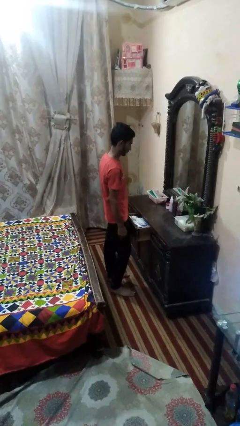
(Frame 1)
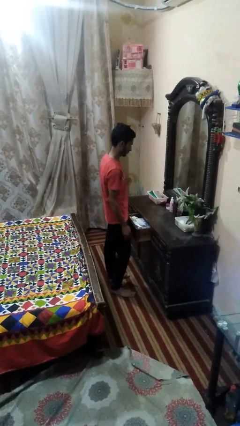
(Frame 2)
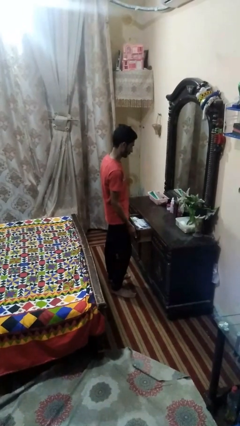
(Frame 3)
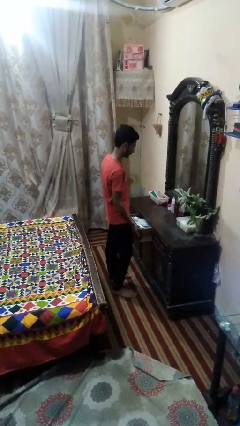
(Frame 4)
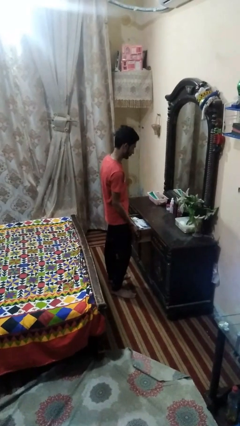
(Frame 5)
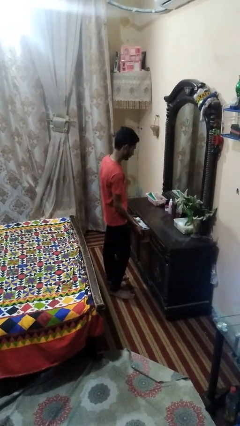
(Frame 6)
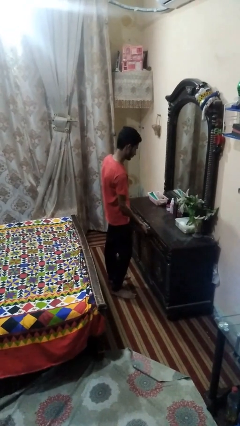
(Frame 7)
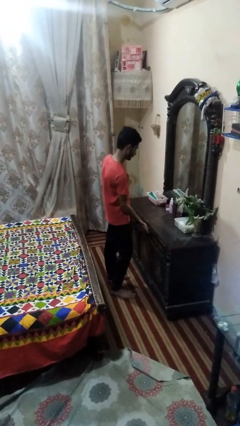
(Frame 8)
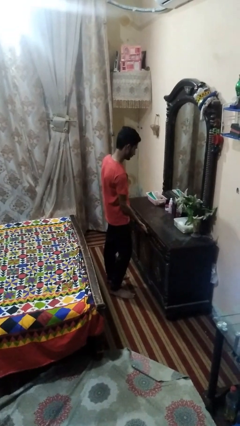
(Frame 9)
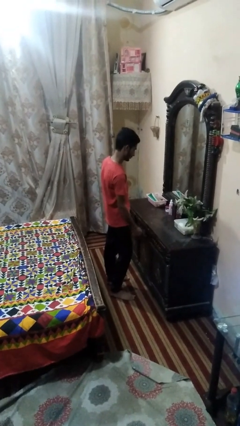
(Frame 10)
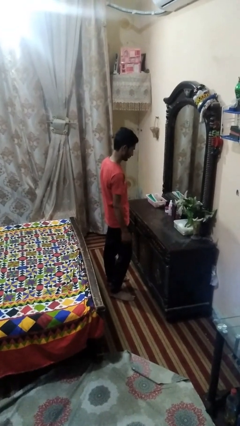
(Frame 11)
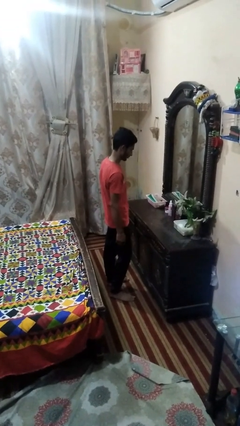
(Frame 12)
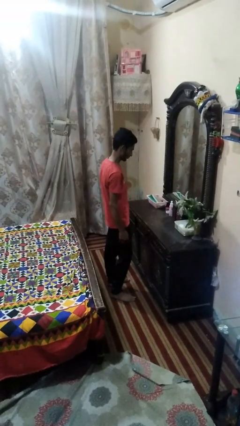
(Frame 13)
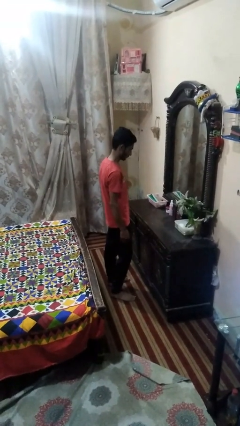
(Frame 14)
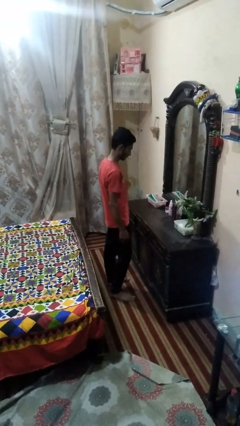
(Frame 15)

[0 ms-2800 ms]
person closes dresser drawer

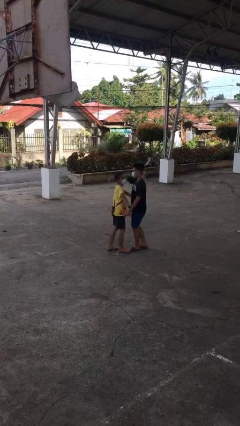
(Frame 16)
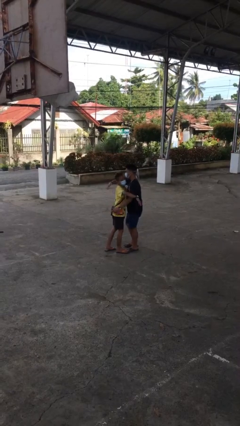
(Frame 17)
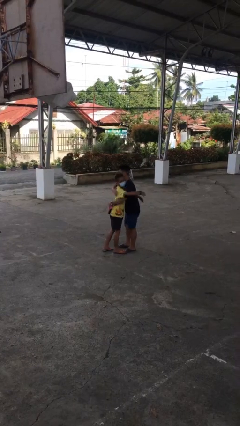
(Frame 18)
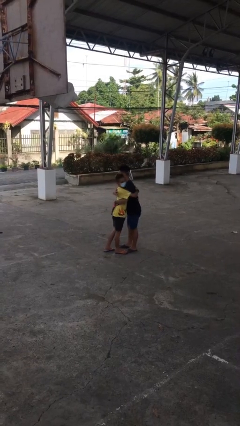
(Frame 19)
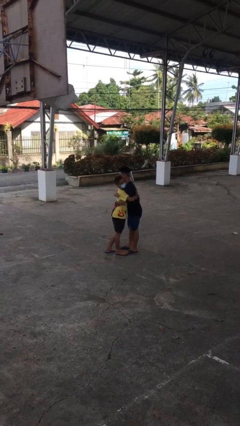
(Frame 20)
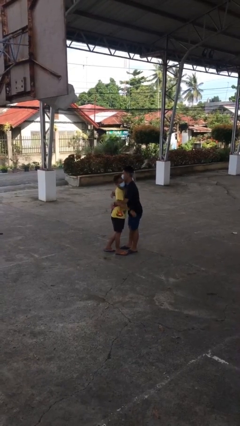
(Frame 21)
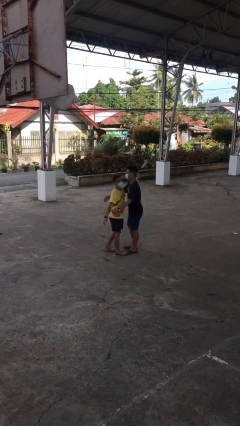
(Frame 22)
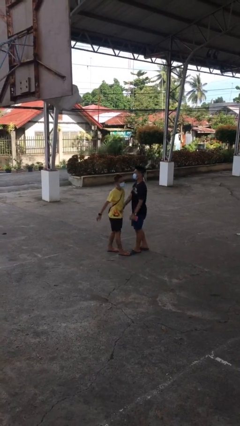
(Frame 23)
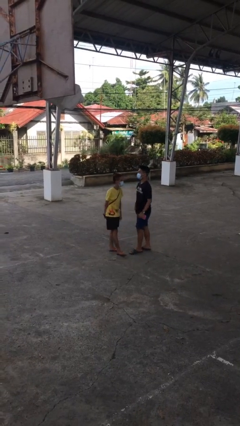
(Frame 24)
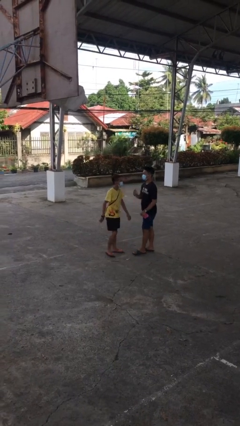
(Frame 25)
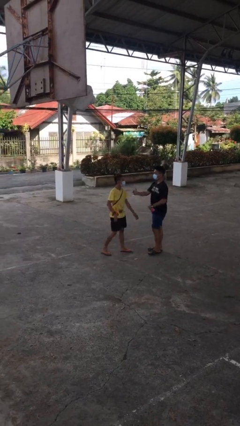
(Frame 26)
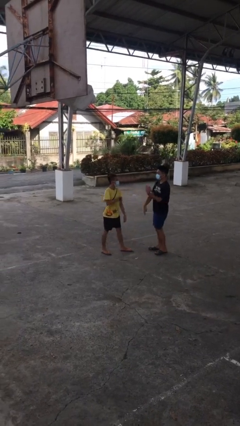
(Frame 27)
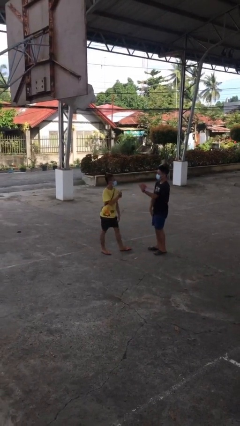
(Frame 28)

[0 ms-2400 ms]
person embraces person

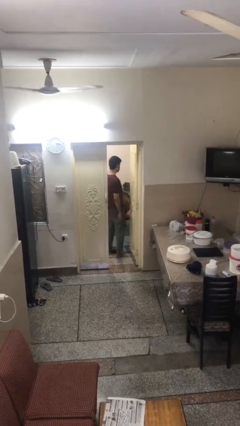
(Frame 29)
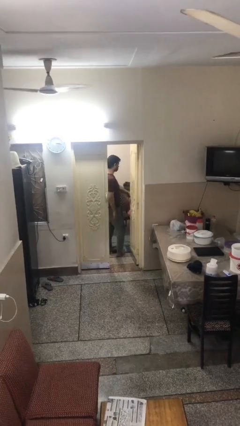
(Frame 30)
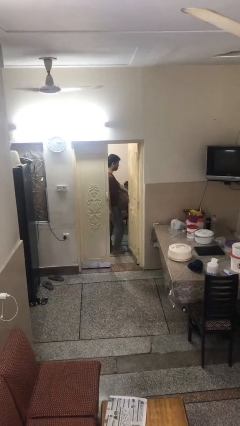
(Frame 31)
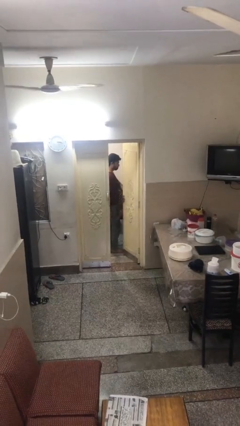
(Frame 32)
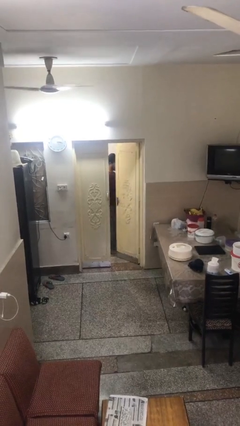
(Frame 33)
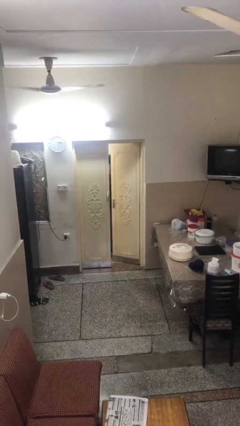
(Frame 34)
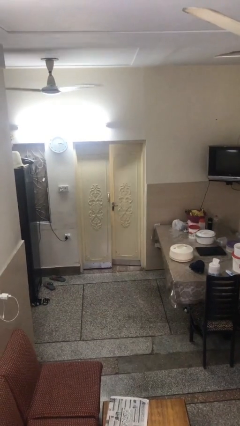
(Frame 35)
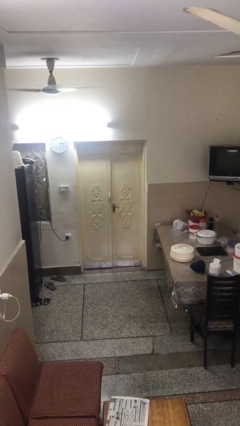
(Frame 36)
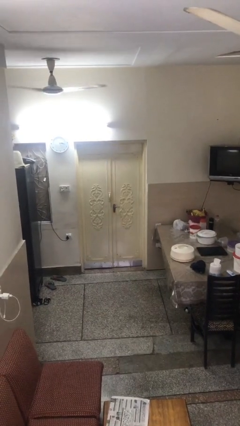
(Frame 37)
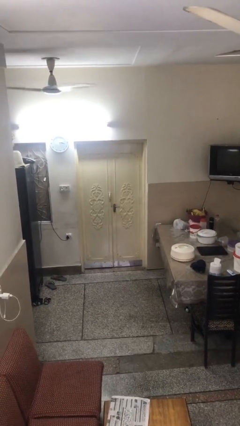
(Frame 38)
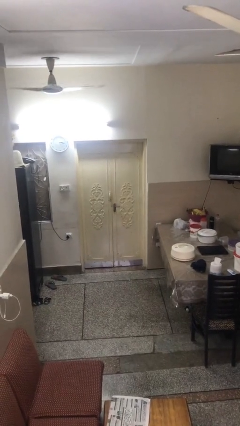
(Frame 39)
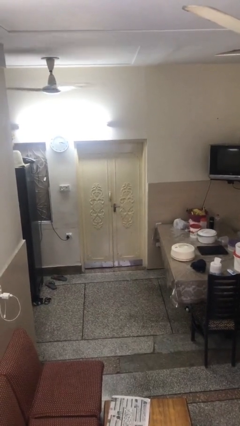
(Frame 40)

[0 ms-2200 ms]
person closes facility door

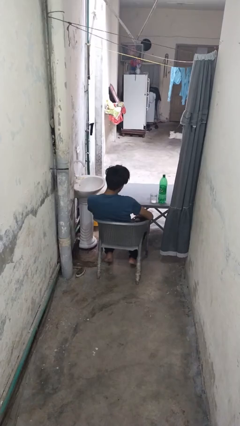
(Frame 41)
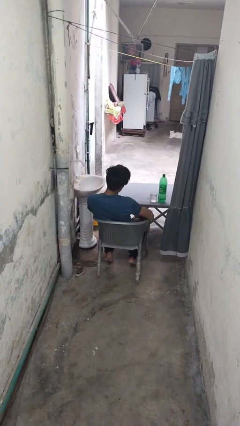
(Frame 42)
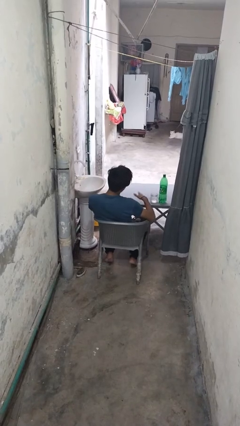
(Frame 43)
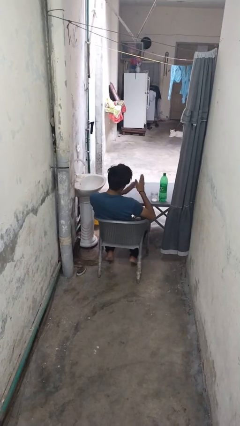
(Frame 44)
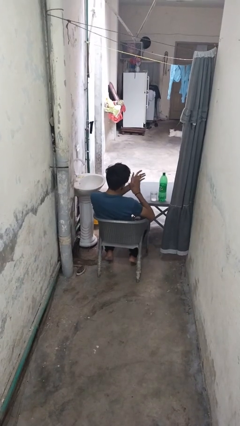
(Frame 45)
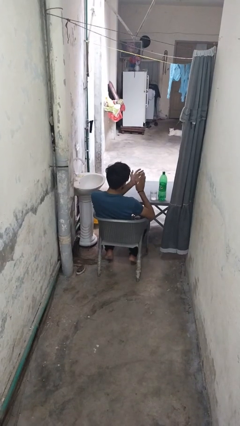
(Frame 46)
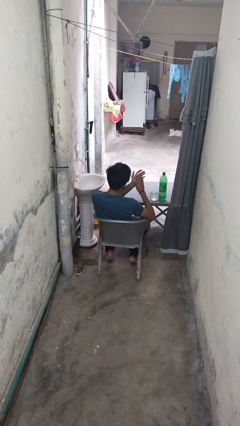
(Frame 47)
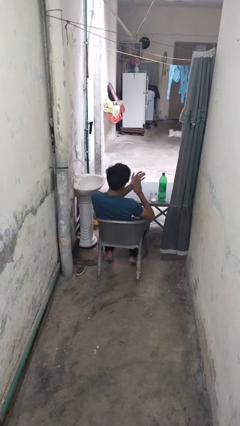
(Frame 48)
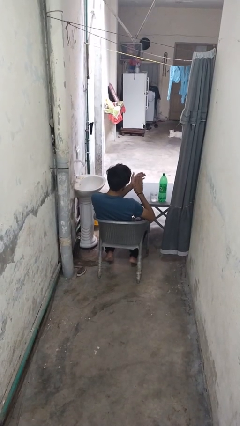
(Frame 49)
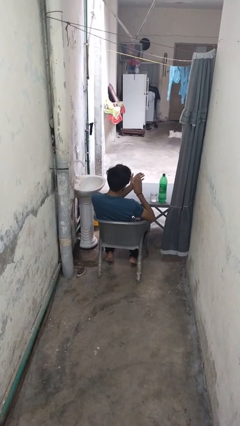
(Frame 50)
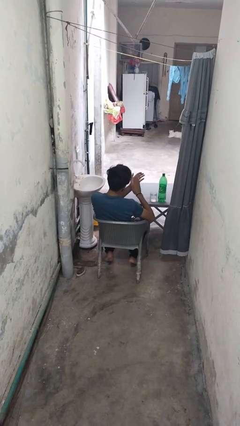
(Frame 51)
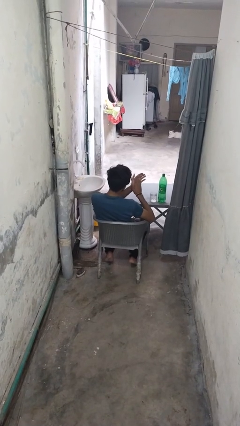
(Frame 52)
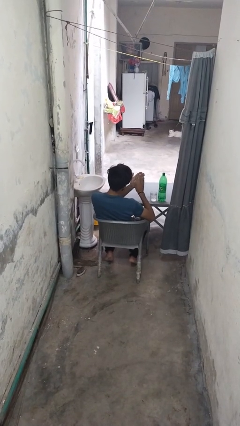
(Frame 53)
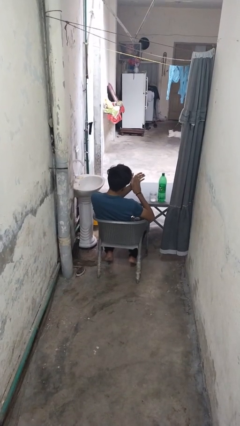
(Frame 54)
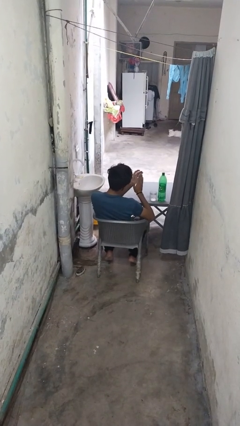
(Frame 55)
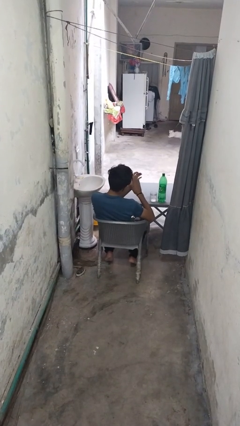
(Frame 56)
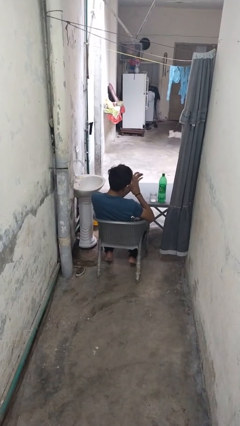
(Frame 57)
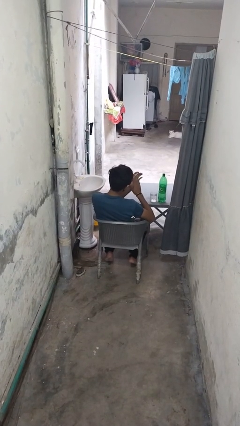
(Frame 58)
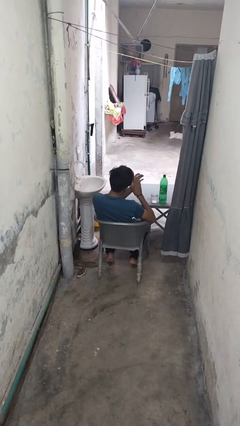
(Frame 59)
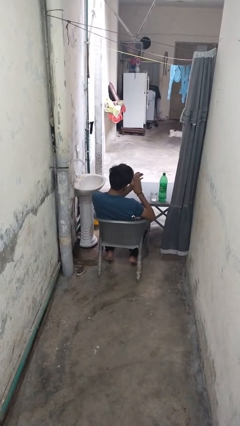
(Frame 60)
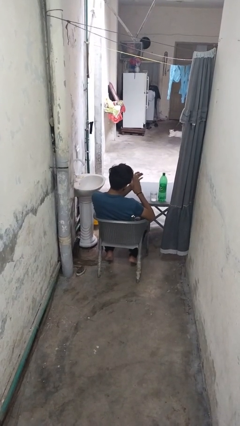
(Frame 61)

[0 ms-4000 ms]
person claps hands

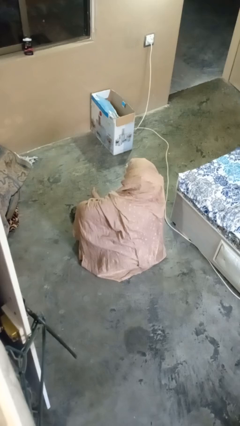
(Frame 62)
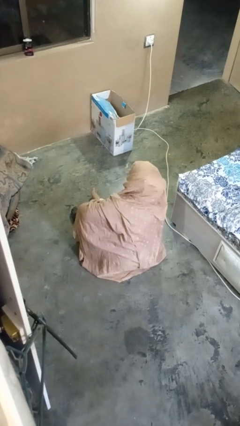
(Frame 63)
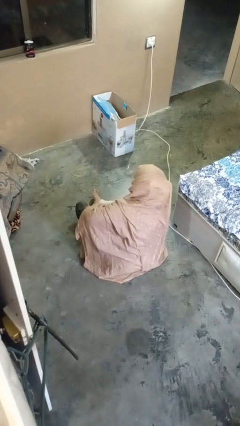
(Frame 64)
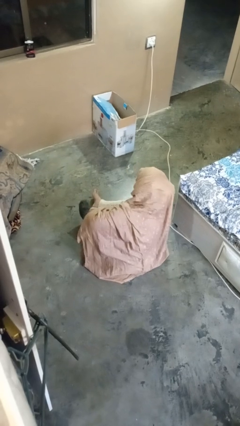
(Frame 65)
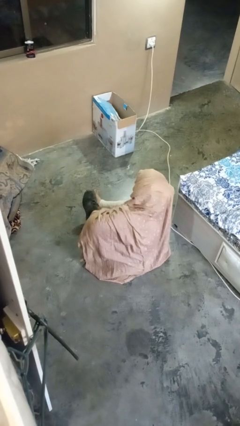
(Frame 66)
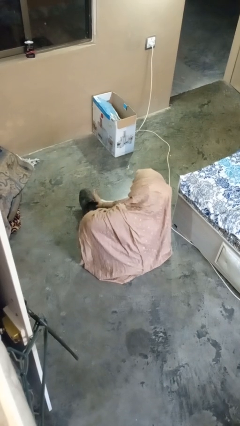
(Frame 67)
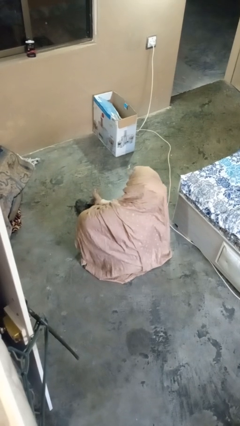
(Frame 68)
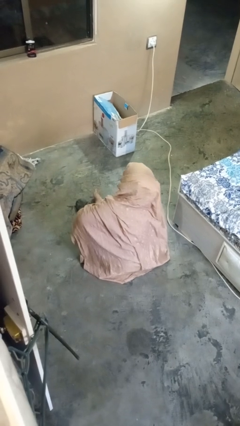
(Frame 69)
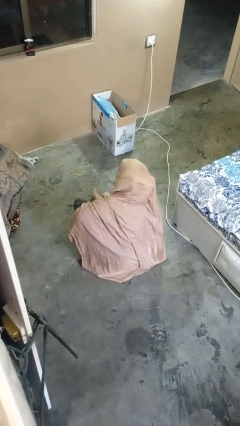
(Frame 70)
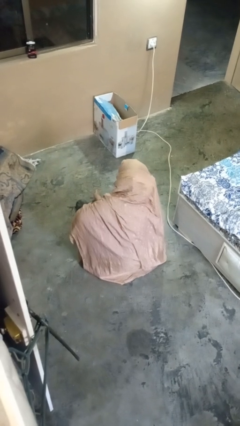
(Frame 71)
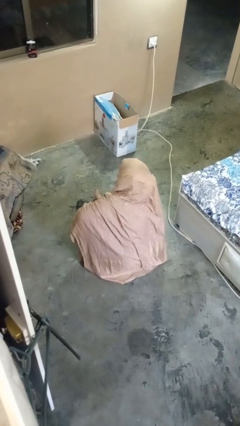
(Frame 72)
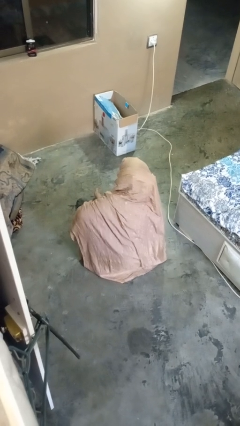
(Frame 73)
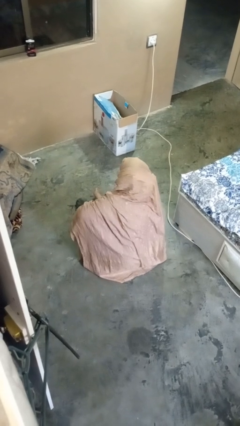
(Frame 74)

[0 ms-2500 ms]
person takes off shoes

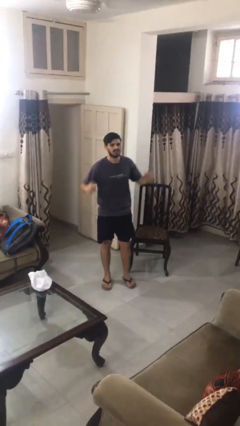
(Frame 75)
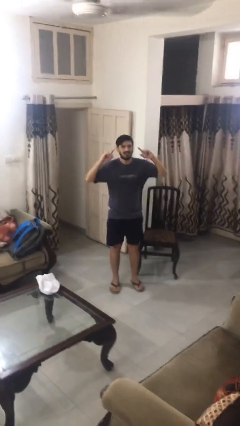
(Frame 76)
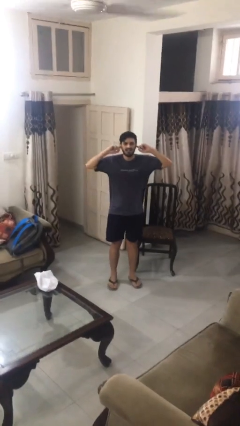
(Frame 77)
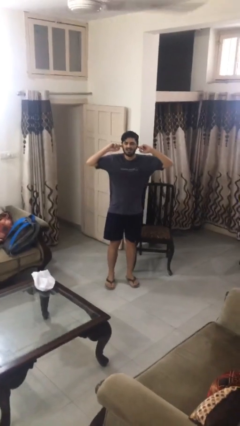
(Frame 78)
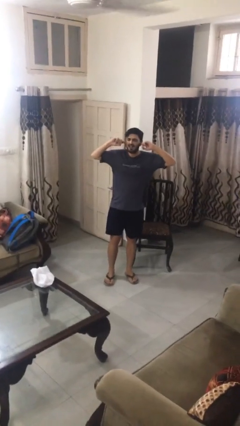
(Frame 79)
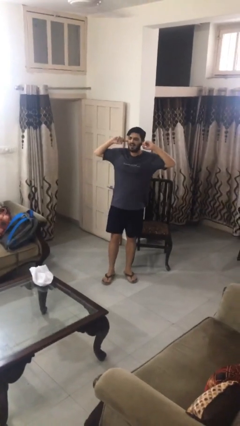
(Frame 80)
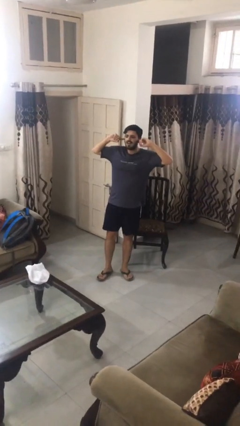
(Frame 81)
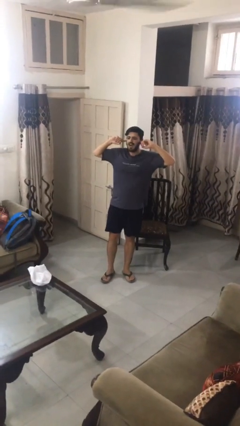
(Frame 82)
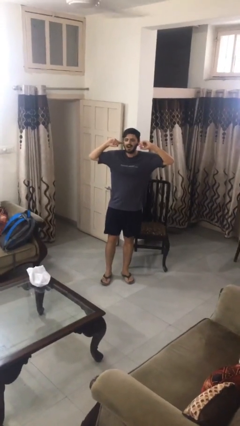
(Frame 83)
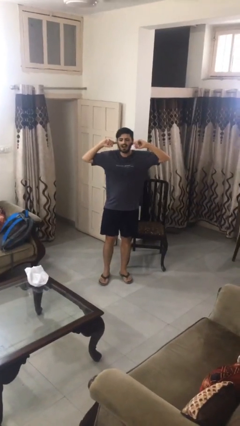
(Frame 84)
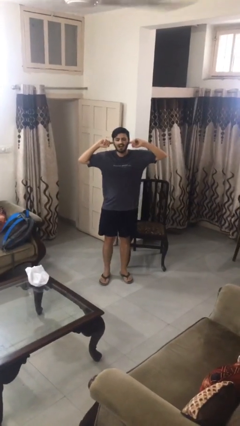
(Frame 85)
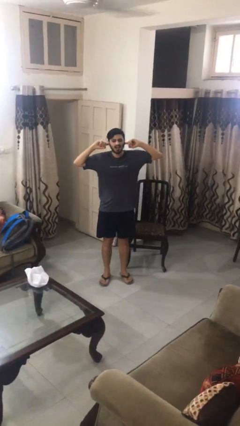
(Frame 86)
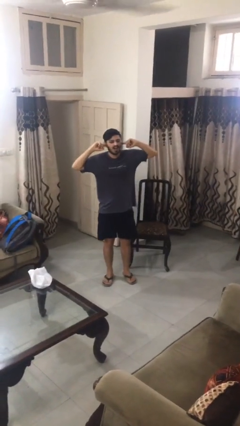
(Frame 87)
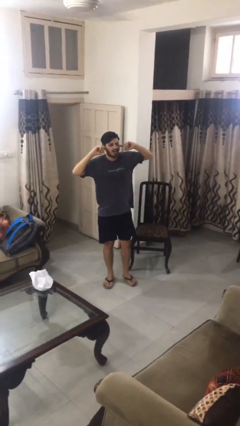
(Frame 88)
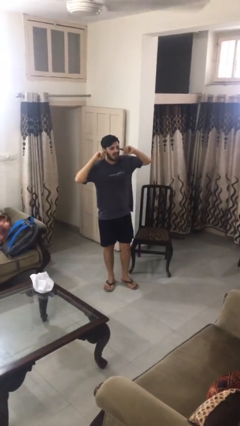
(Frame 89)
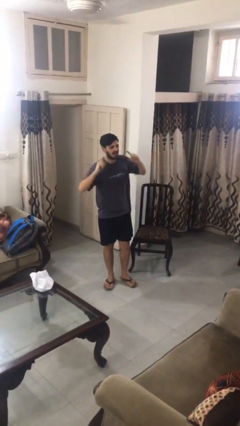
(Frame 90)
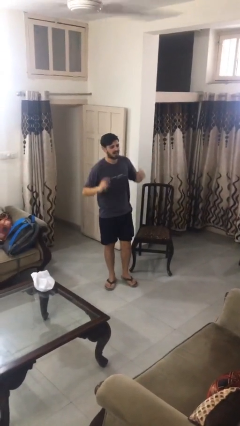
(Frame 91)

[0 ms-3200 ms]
person puts fingers in ear

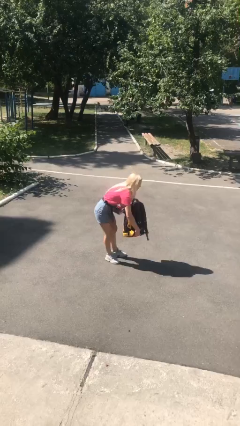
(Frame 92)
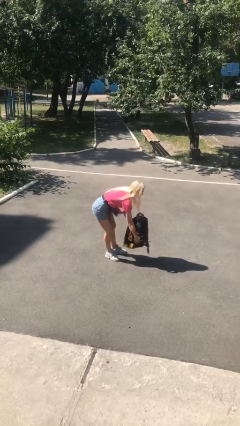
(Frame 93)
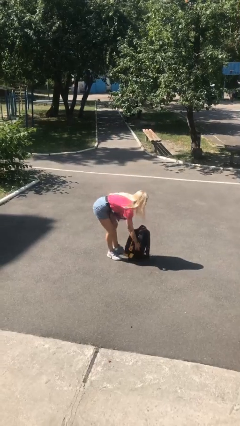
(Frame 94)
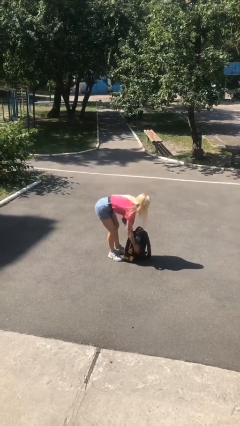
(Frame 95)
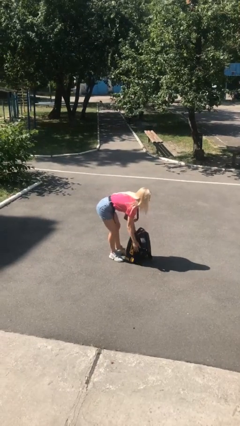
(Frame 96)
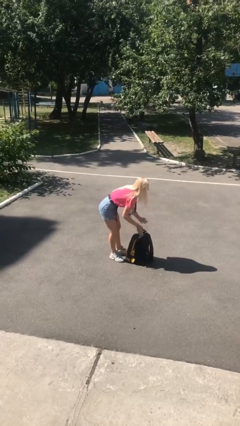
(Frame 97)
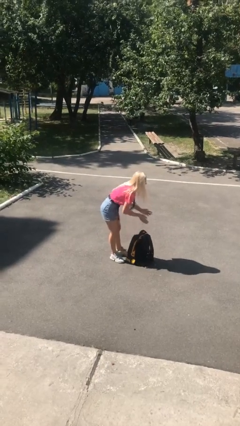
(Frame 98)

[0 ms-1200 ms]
person puts down object on floor
